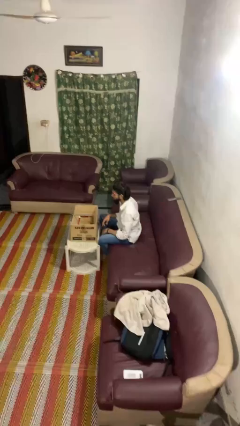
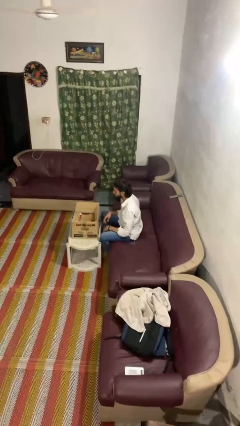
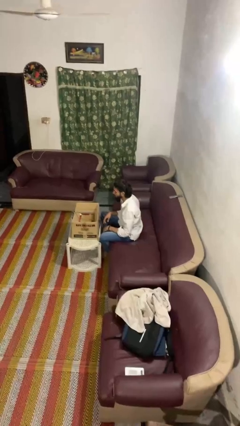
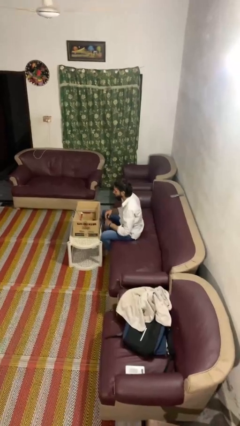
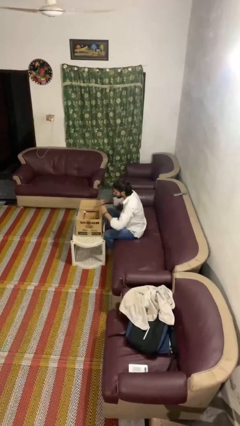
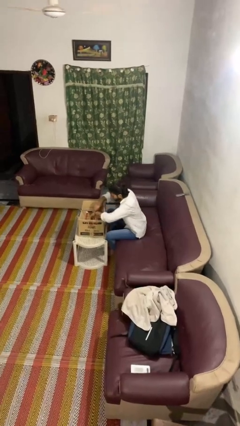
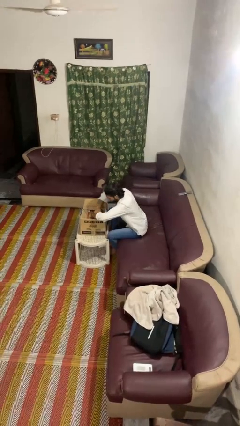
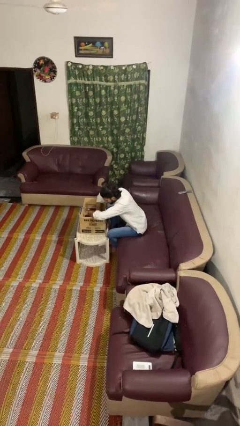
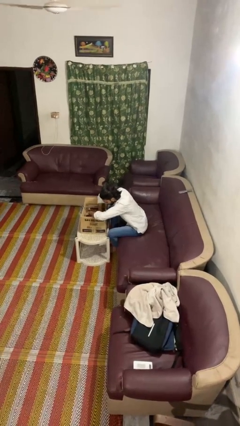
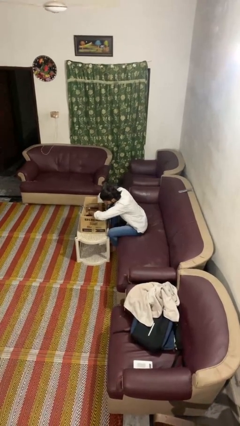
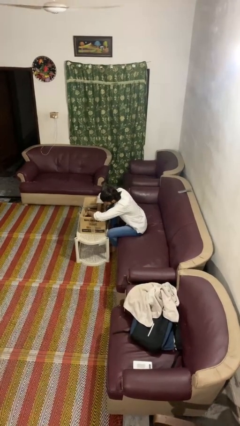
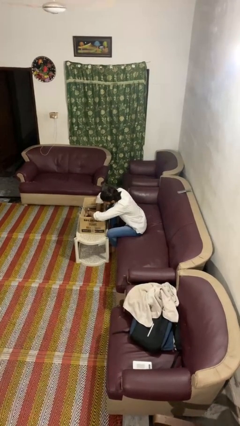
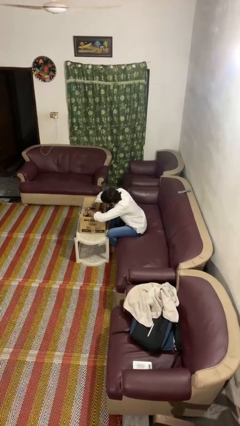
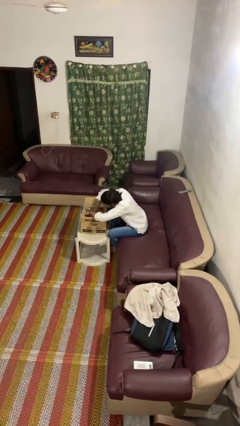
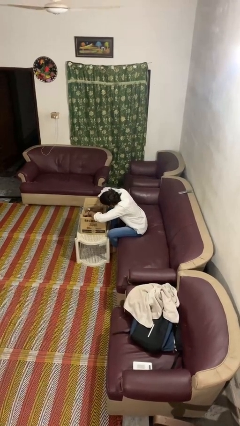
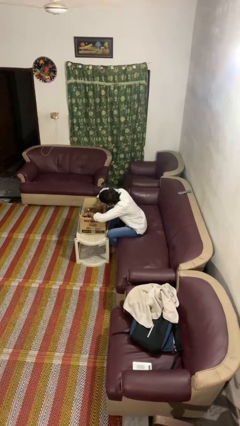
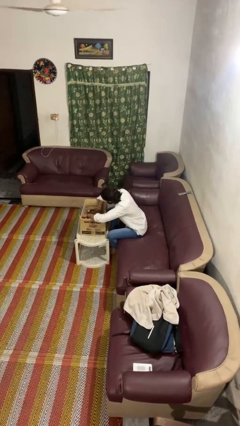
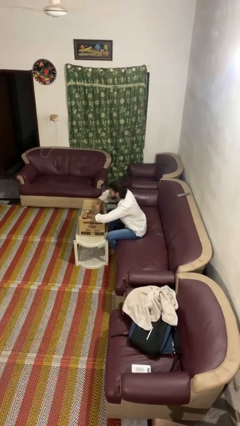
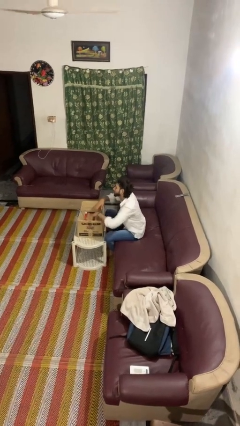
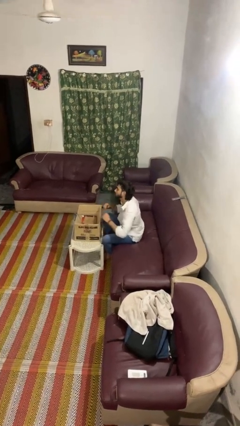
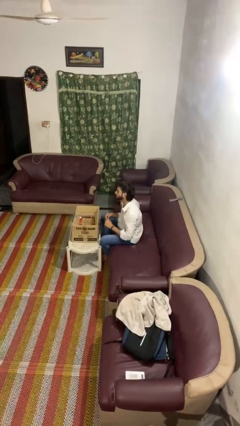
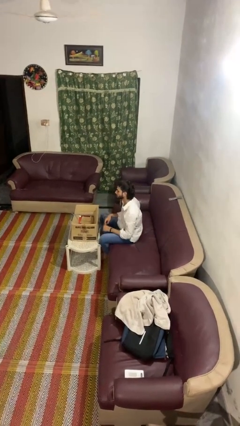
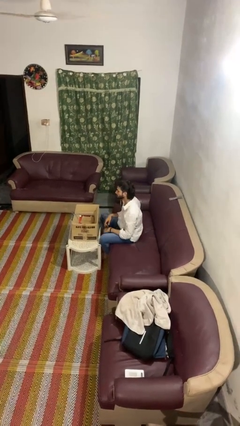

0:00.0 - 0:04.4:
person searches in box

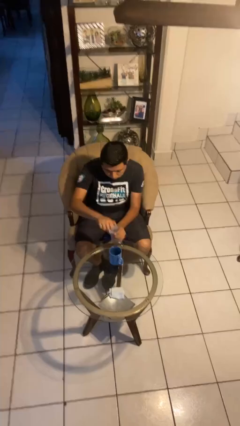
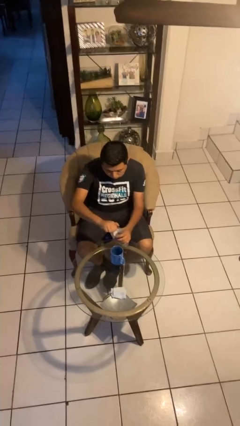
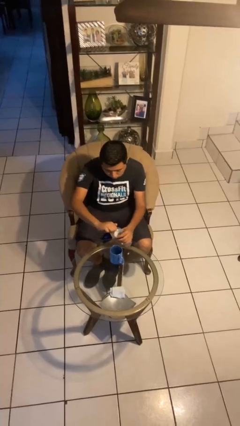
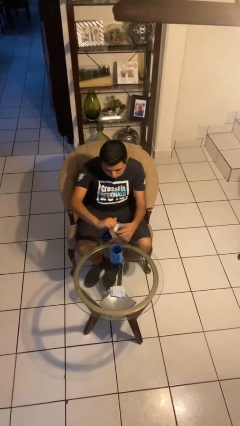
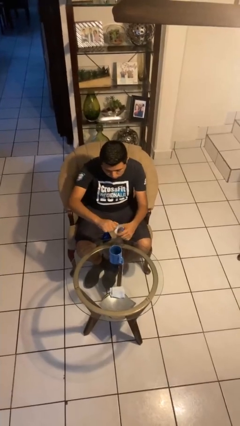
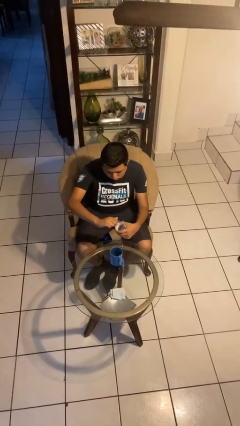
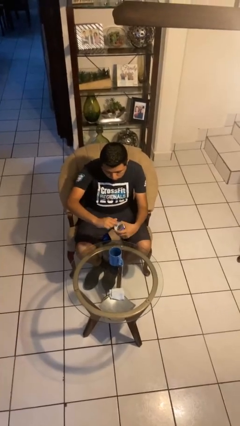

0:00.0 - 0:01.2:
person unscrews lid from bottle

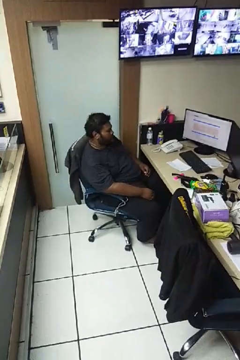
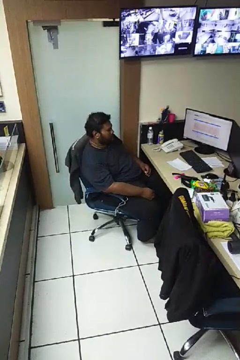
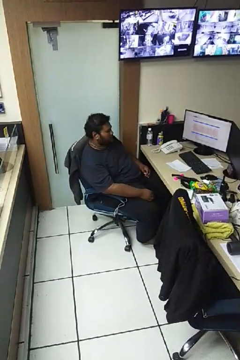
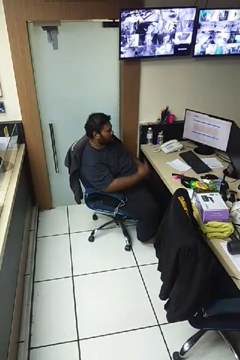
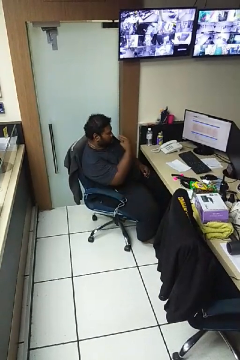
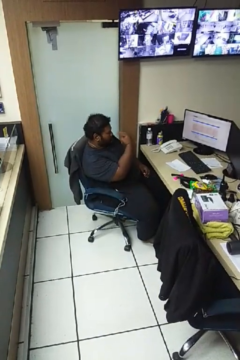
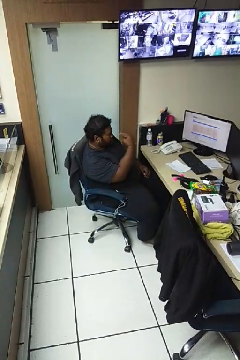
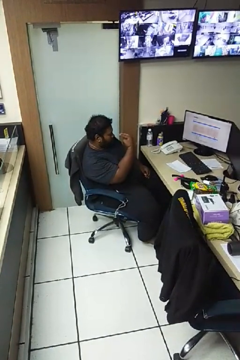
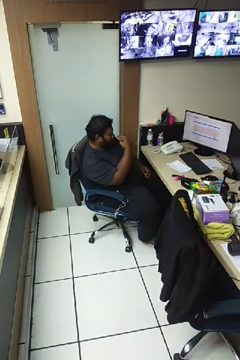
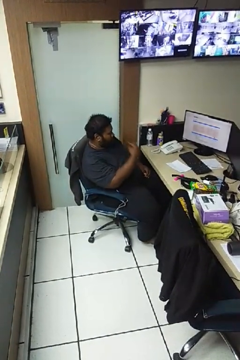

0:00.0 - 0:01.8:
person gestures watch closely

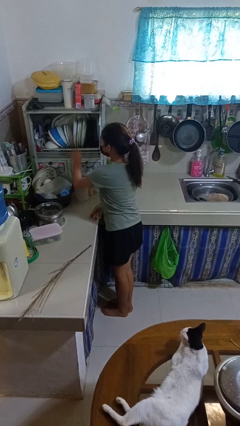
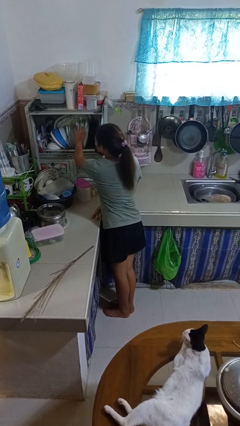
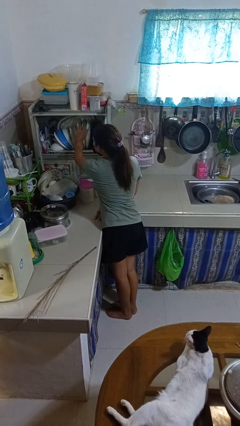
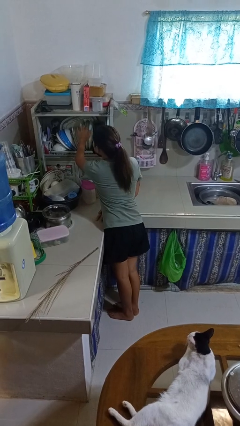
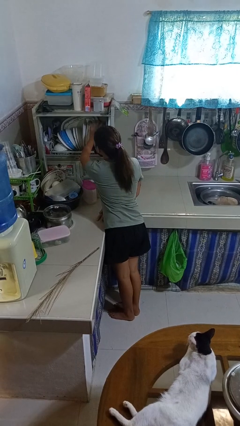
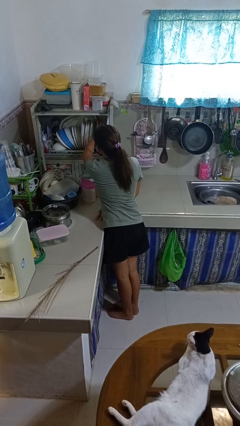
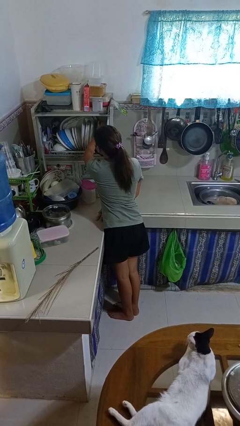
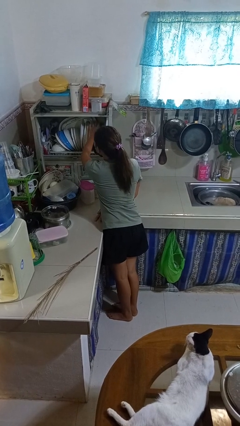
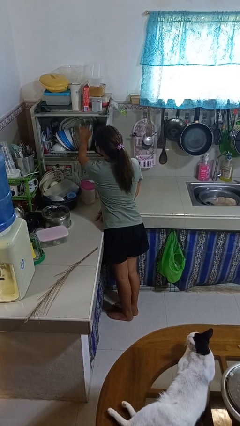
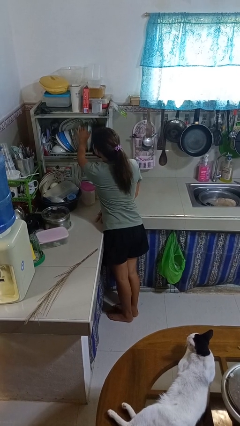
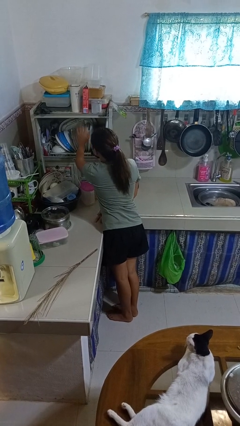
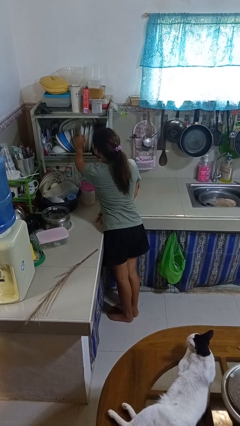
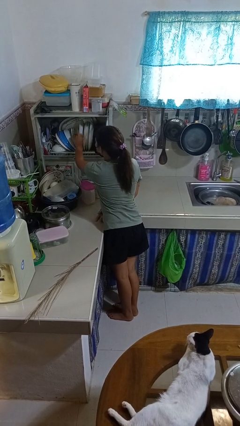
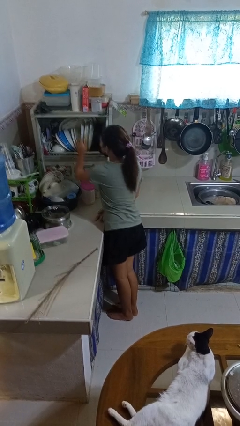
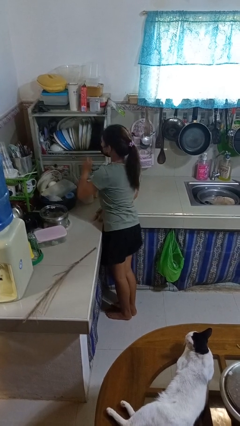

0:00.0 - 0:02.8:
person searches in kitchen drawer

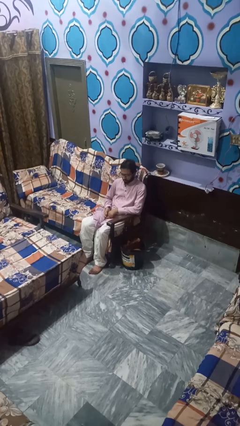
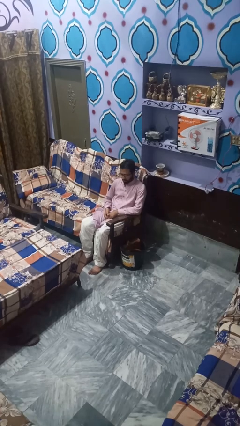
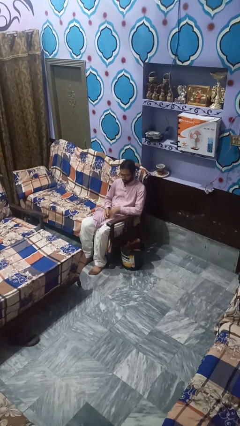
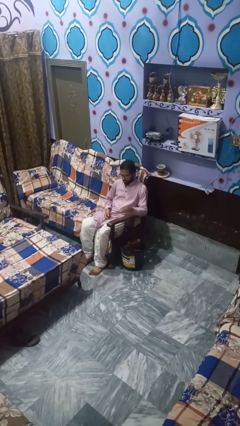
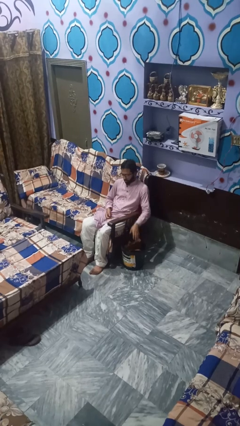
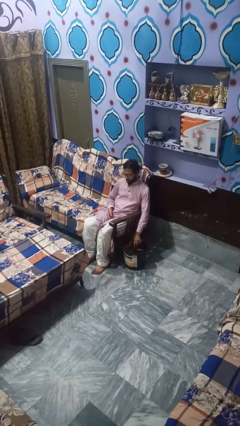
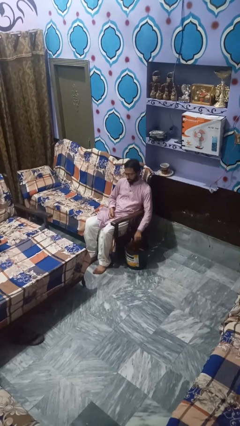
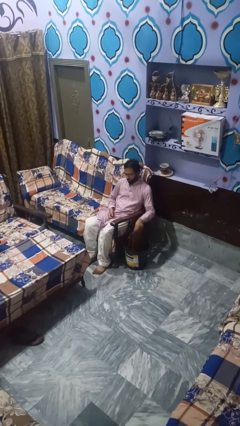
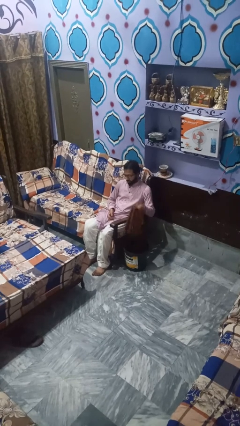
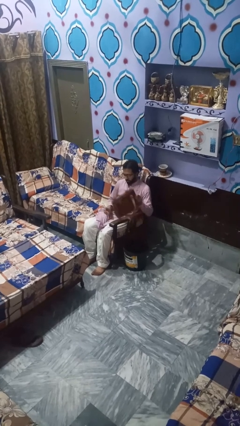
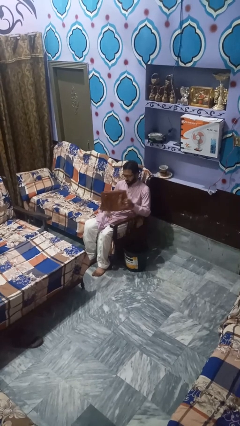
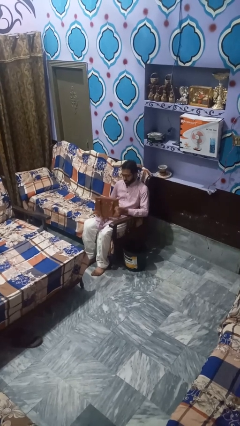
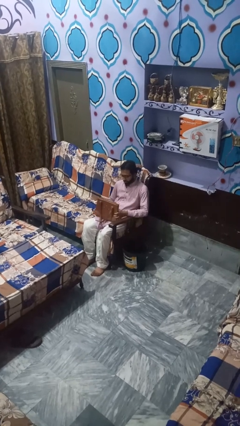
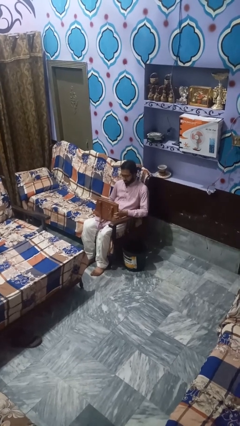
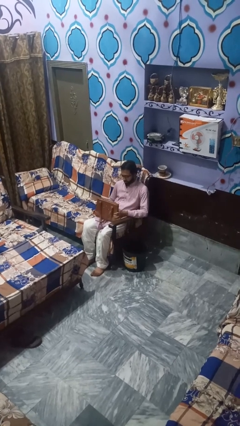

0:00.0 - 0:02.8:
person takes object from basket

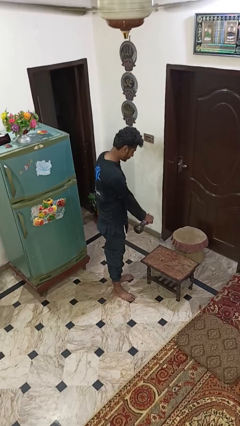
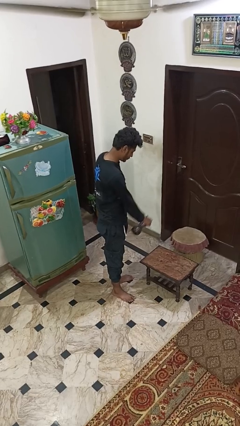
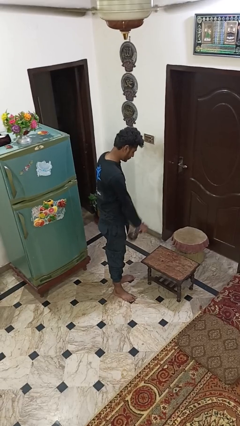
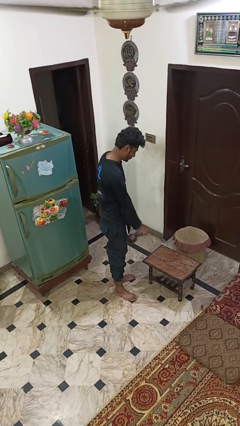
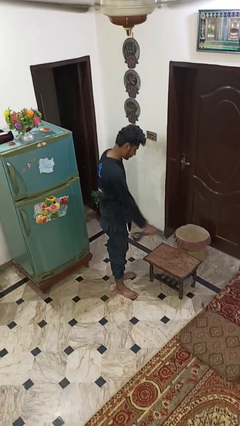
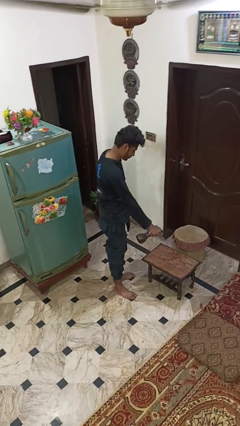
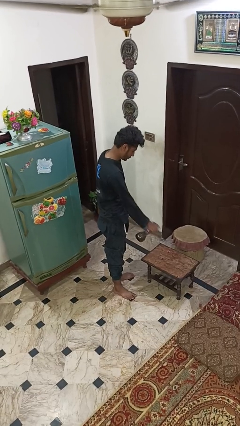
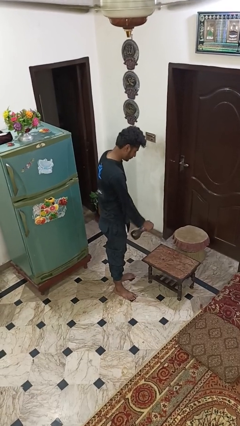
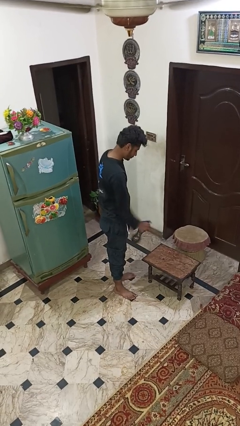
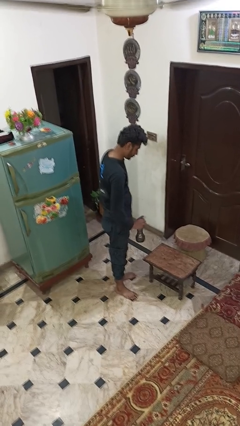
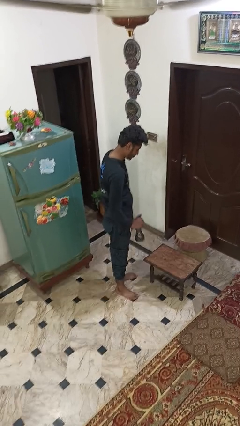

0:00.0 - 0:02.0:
person sprays from bottle

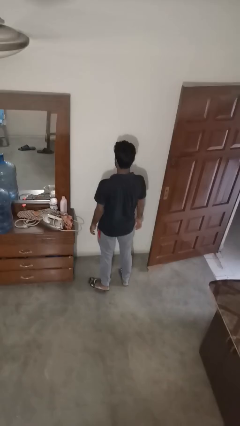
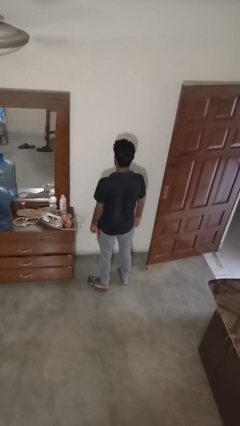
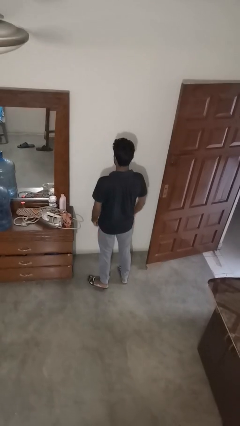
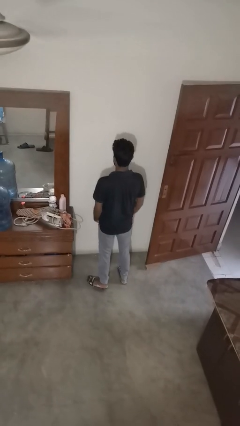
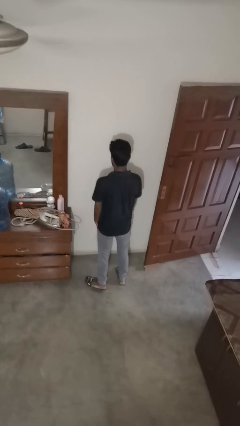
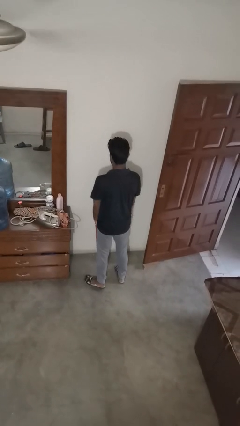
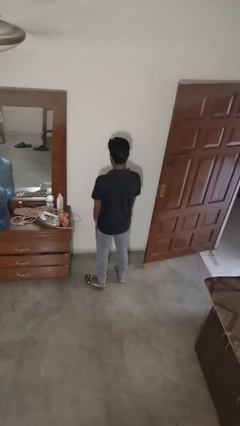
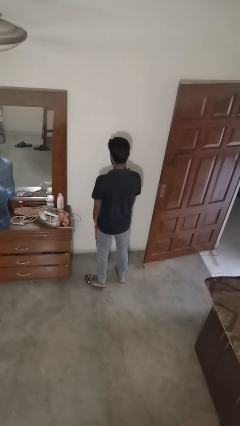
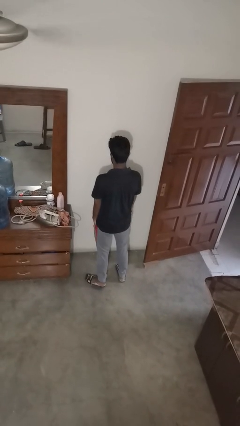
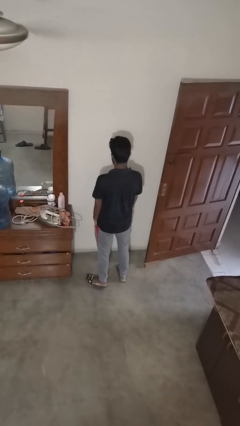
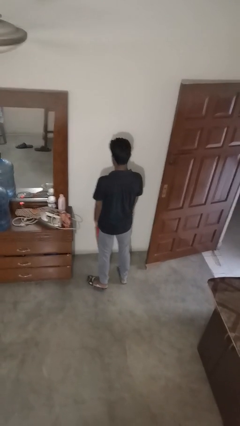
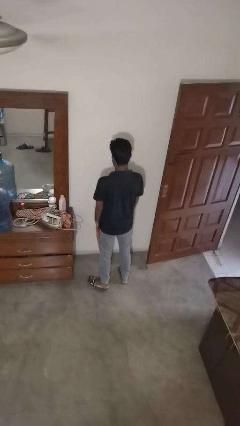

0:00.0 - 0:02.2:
person puts hands in back pockets

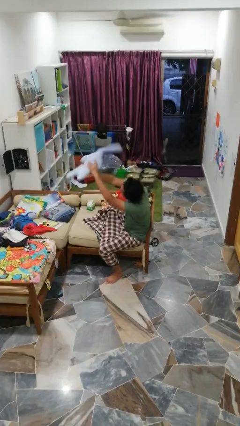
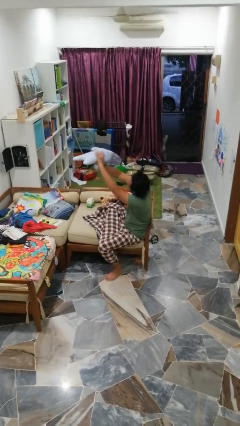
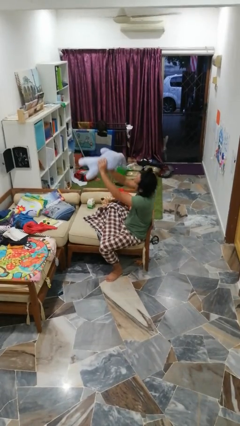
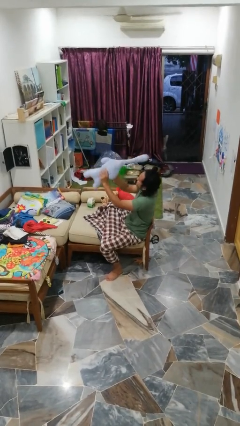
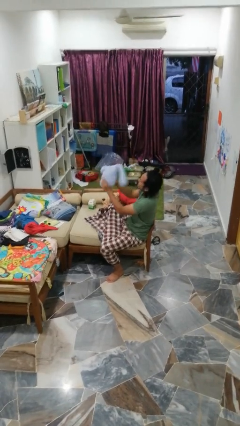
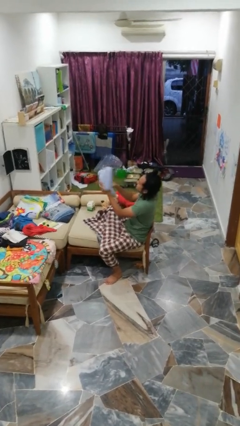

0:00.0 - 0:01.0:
person catches dropped object
